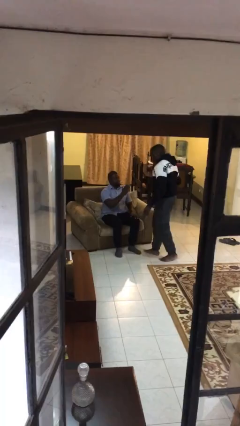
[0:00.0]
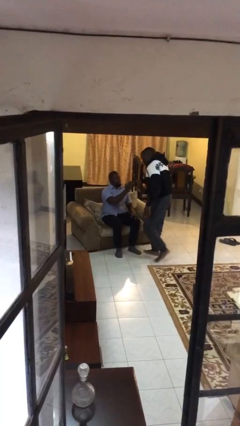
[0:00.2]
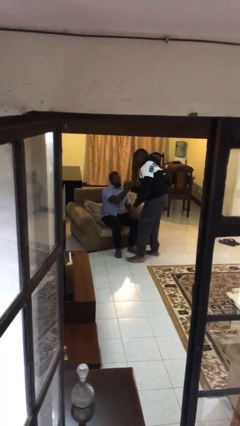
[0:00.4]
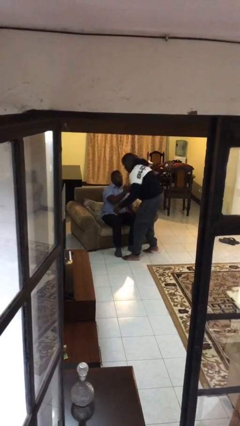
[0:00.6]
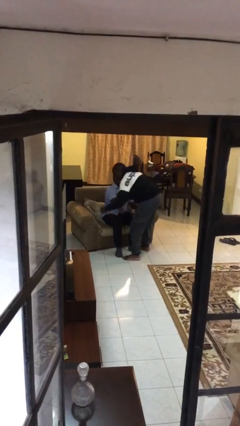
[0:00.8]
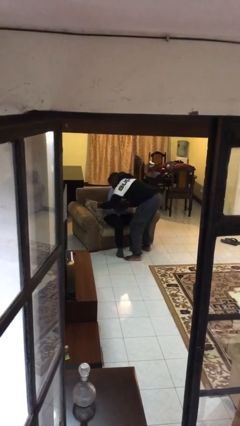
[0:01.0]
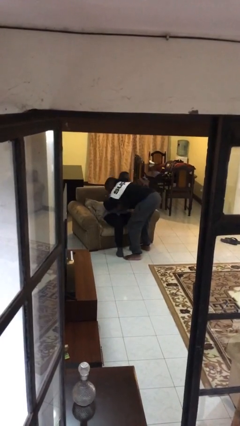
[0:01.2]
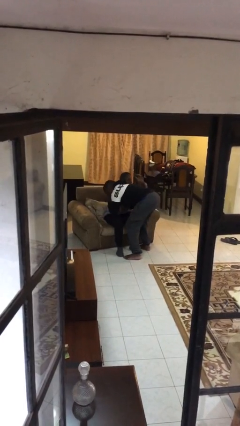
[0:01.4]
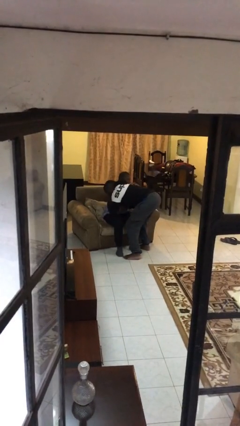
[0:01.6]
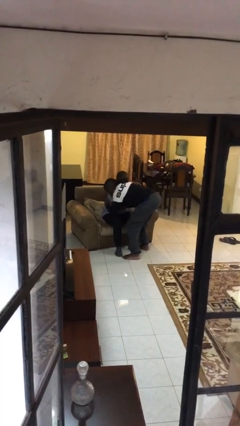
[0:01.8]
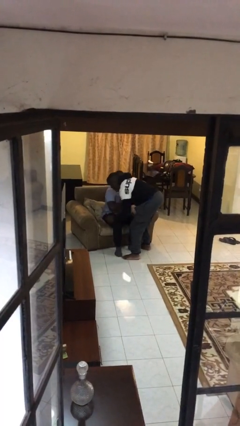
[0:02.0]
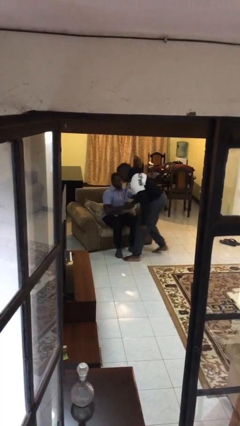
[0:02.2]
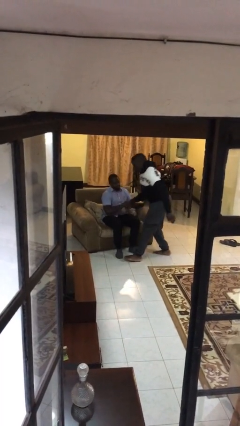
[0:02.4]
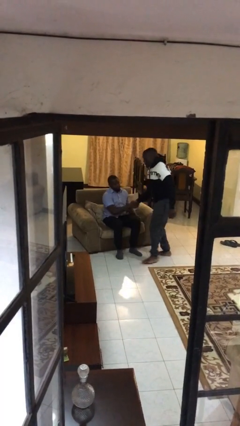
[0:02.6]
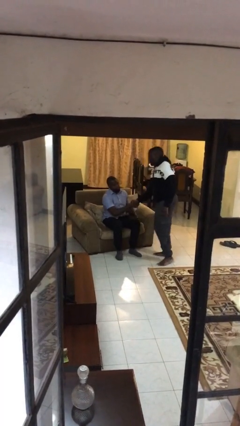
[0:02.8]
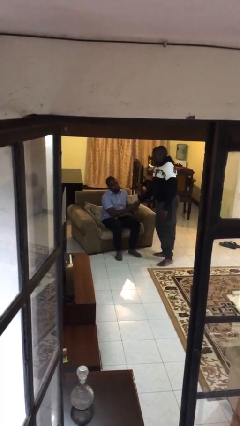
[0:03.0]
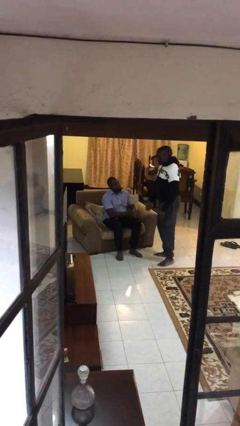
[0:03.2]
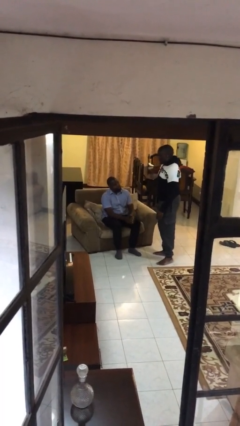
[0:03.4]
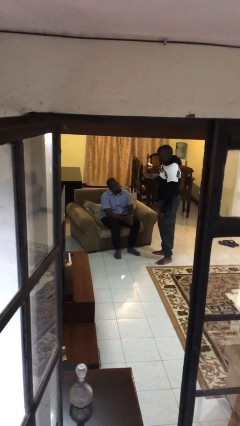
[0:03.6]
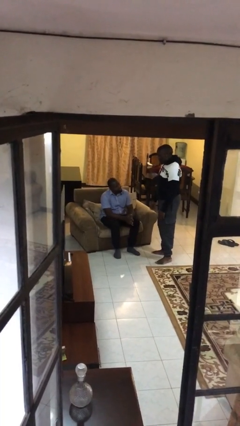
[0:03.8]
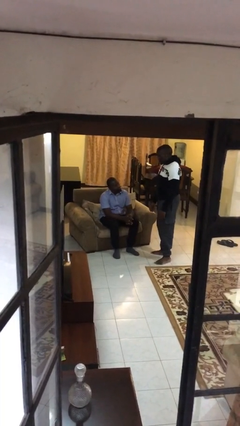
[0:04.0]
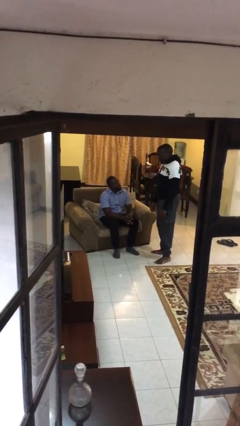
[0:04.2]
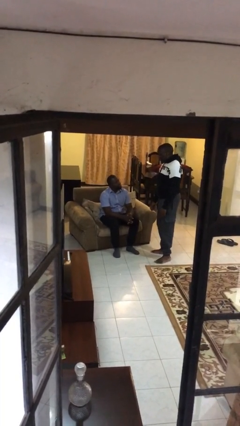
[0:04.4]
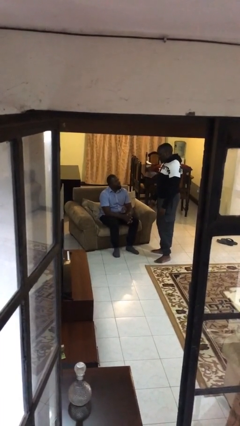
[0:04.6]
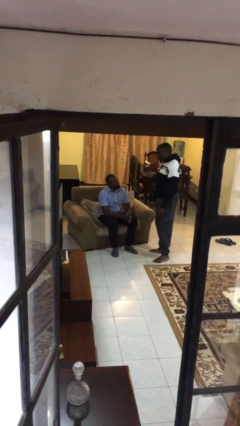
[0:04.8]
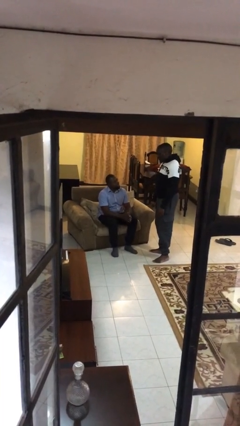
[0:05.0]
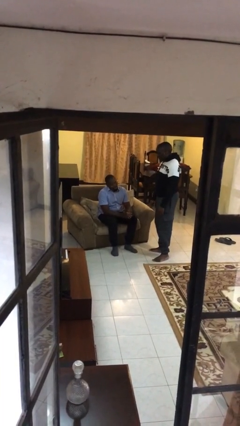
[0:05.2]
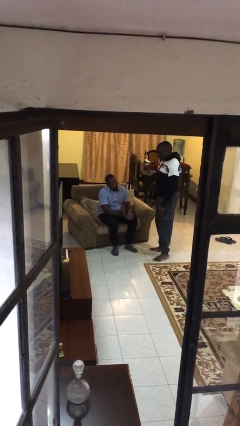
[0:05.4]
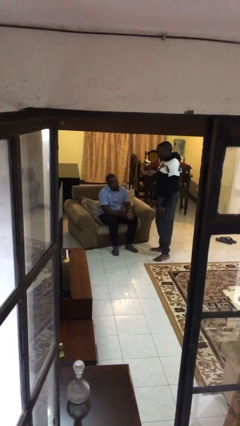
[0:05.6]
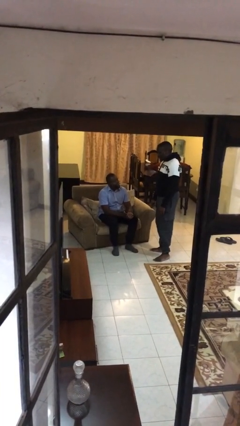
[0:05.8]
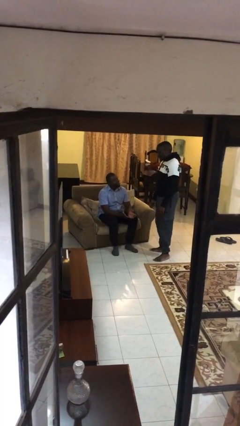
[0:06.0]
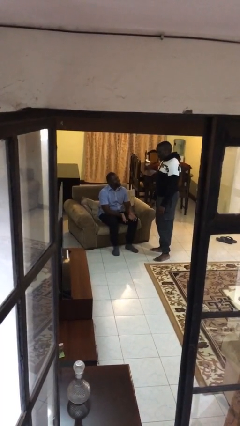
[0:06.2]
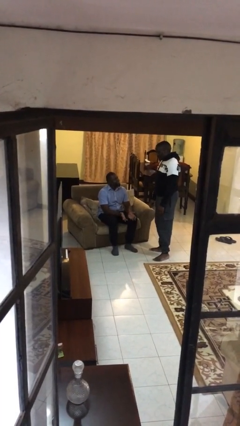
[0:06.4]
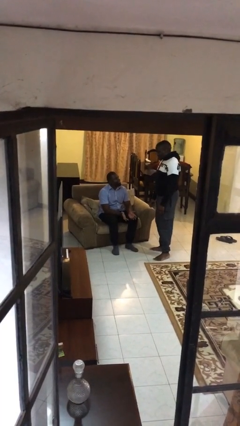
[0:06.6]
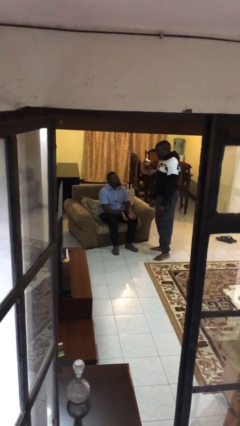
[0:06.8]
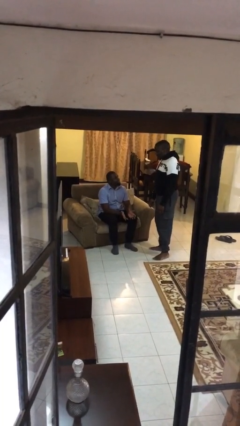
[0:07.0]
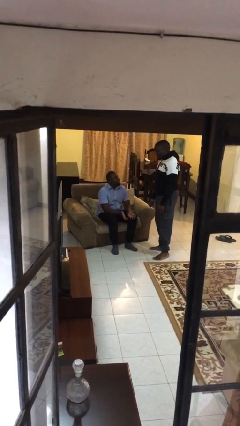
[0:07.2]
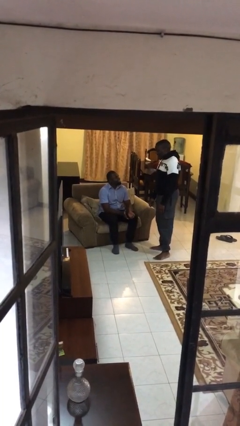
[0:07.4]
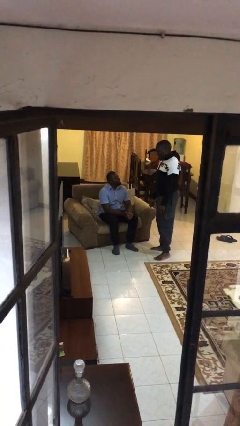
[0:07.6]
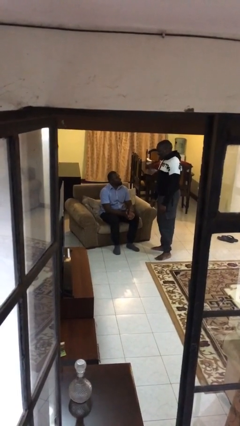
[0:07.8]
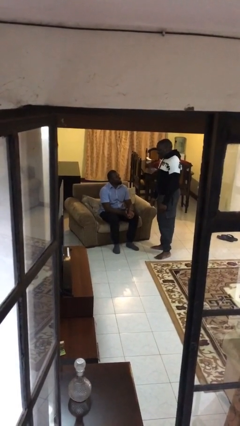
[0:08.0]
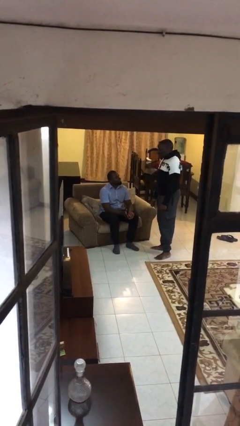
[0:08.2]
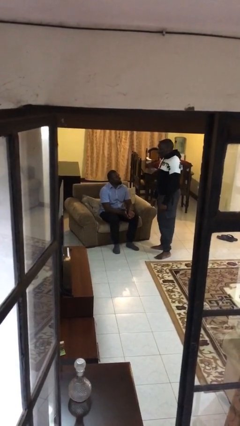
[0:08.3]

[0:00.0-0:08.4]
person embraces person

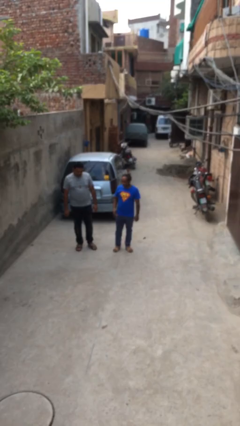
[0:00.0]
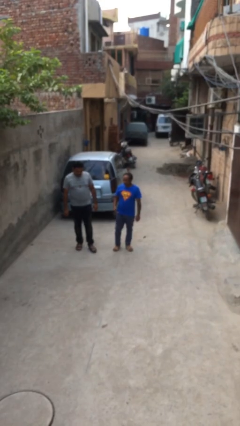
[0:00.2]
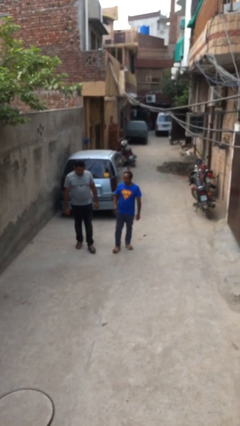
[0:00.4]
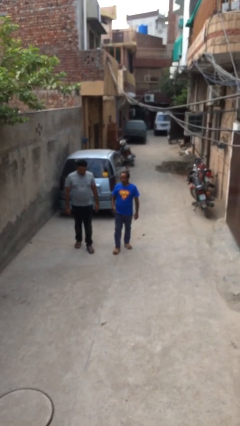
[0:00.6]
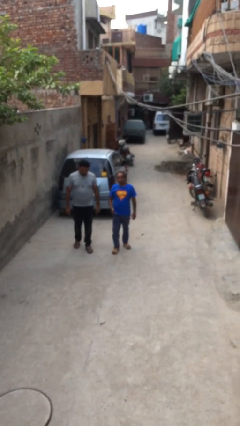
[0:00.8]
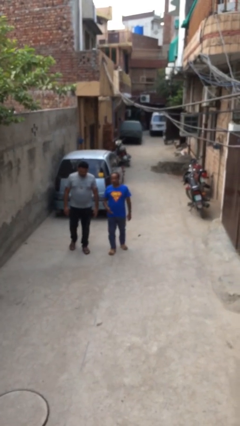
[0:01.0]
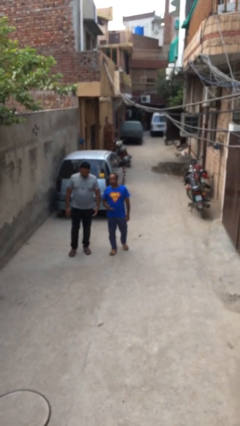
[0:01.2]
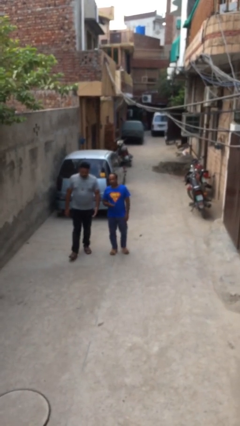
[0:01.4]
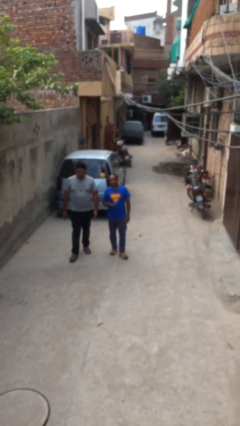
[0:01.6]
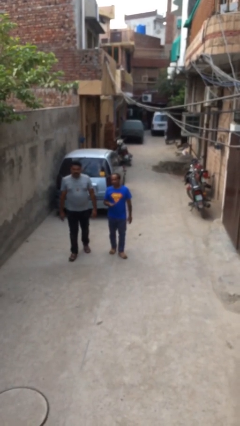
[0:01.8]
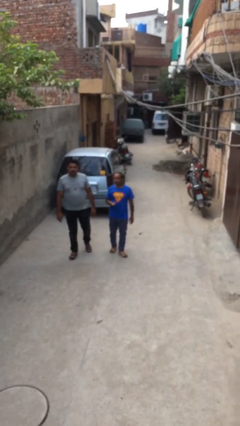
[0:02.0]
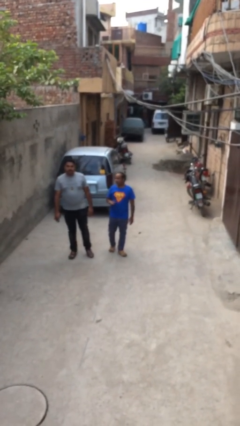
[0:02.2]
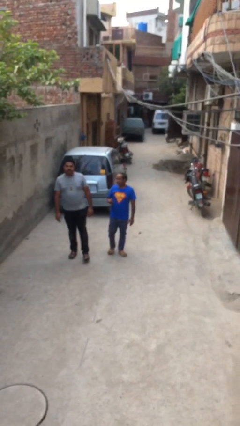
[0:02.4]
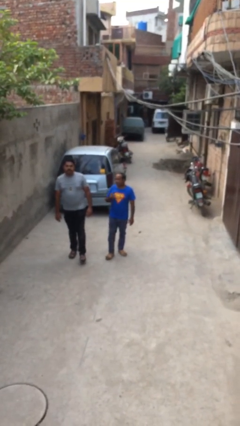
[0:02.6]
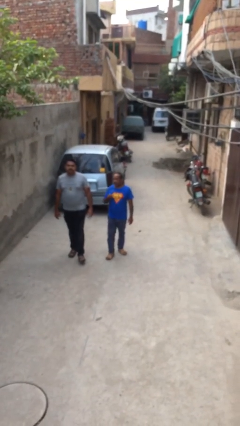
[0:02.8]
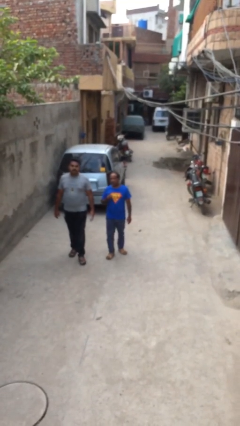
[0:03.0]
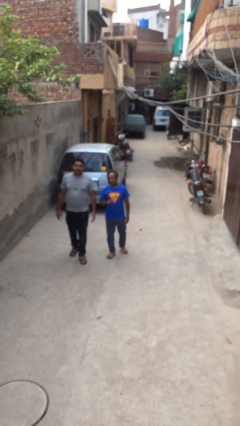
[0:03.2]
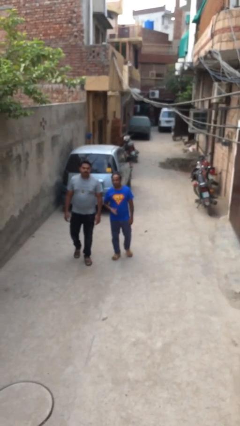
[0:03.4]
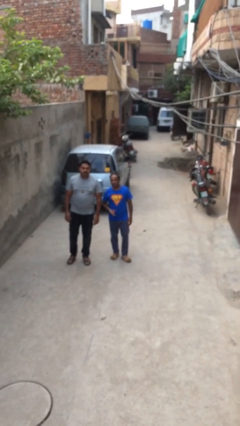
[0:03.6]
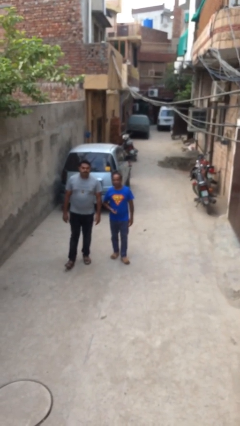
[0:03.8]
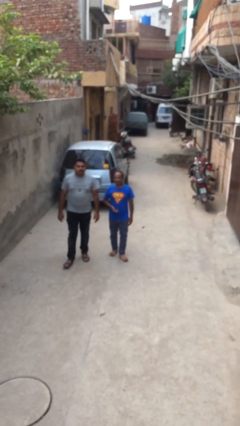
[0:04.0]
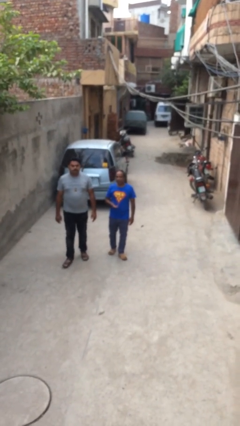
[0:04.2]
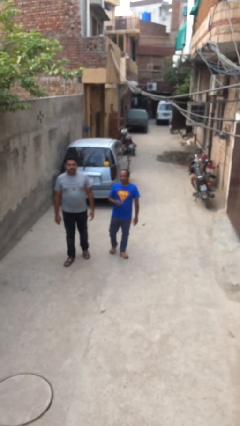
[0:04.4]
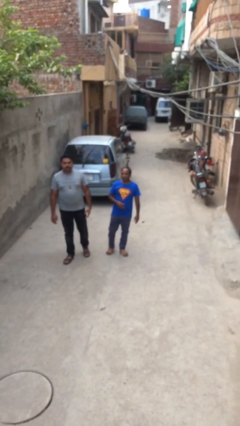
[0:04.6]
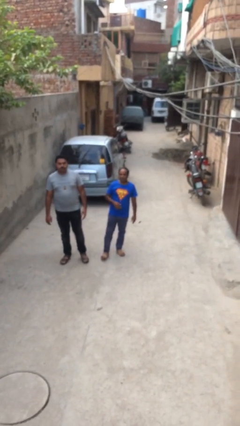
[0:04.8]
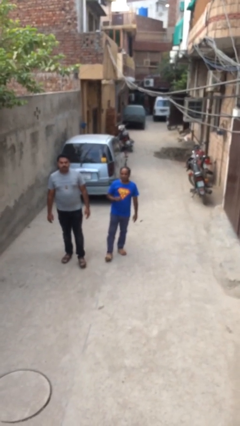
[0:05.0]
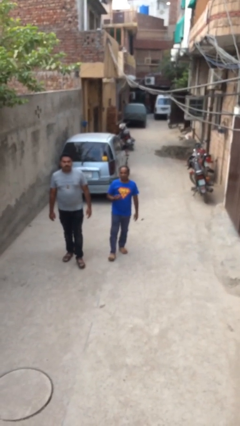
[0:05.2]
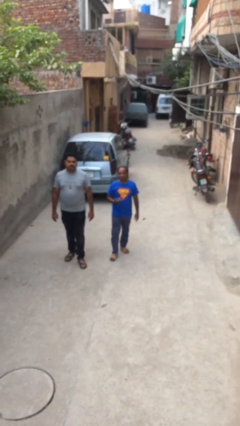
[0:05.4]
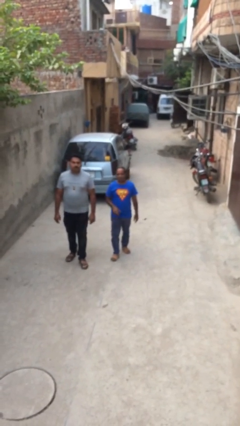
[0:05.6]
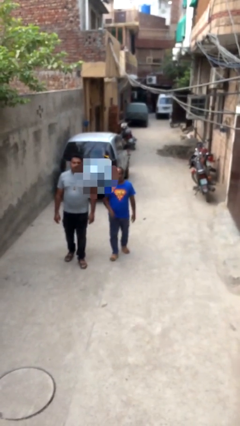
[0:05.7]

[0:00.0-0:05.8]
person talks to person

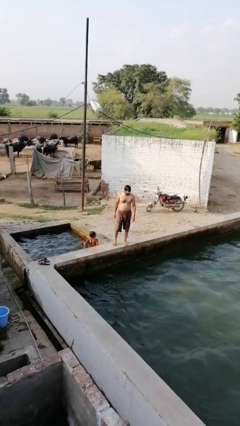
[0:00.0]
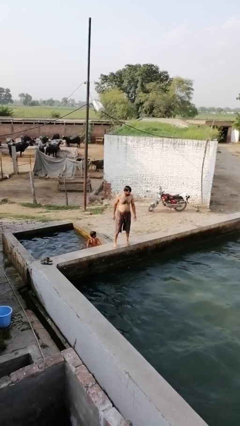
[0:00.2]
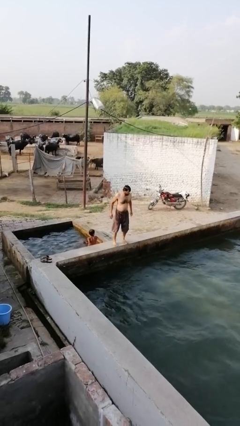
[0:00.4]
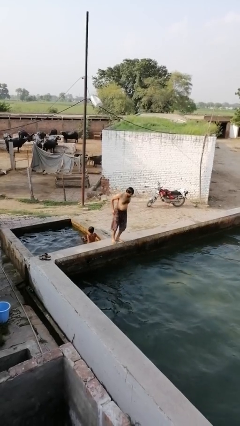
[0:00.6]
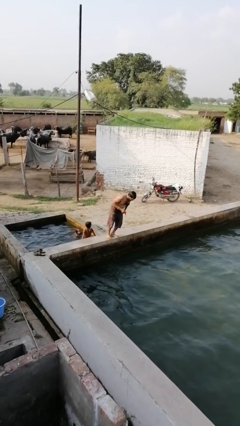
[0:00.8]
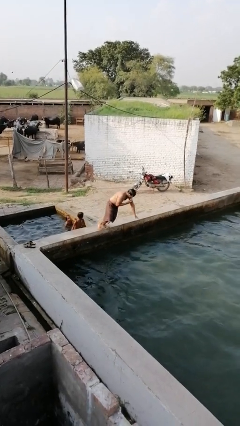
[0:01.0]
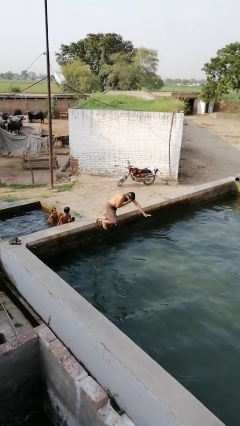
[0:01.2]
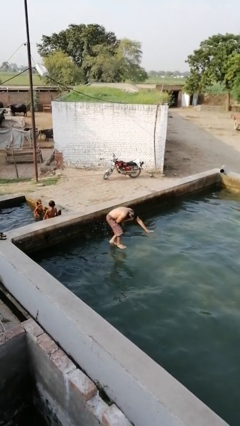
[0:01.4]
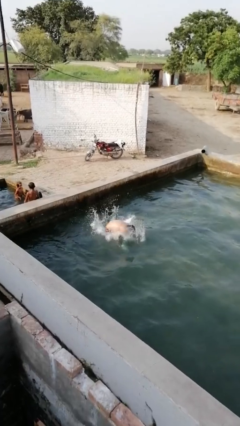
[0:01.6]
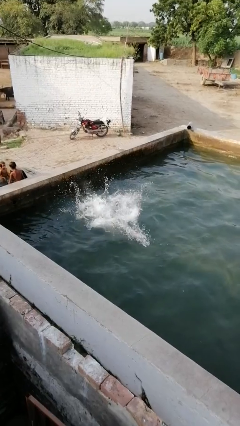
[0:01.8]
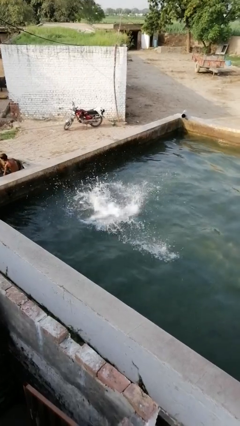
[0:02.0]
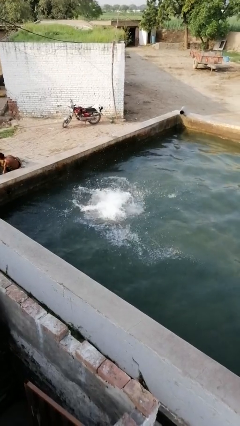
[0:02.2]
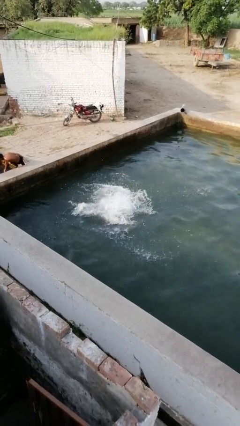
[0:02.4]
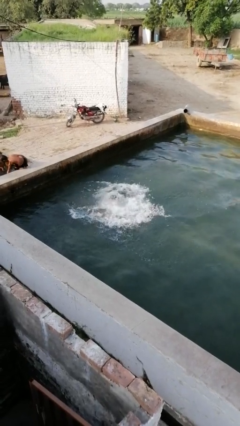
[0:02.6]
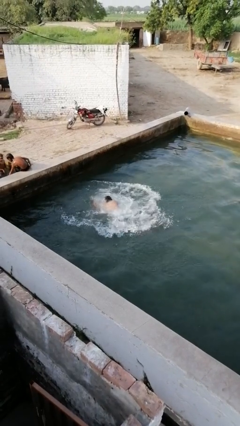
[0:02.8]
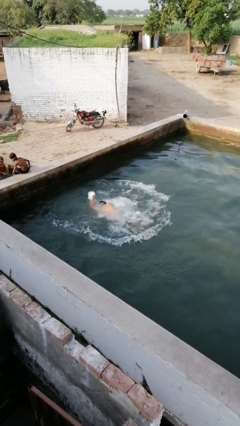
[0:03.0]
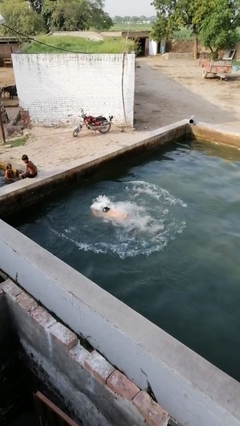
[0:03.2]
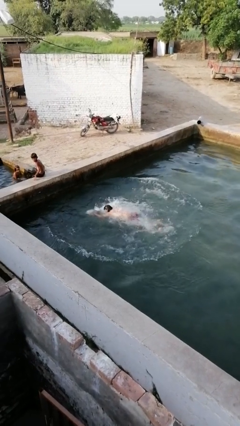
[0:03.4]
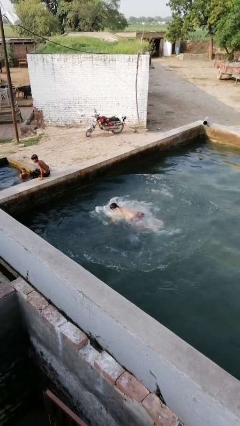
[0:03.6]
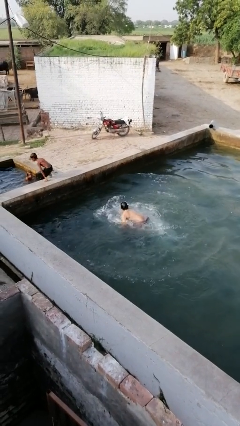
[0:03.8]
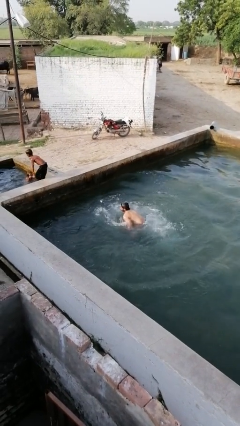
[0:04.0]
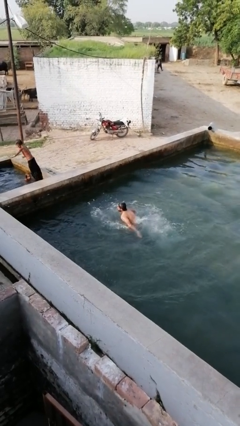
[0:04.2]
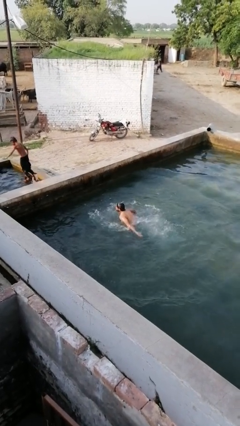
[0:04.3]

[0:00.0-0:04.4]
person jumps into pool
